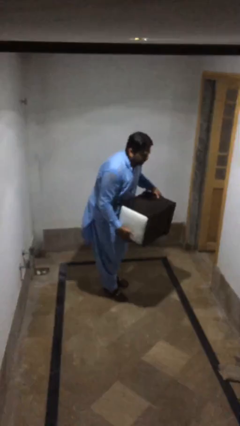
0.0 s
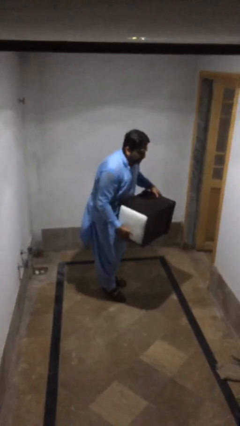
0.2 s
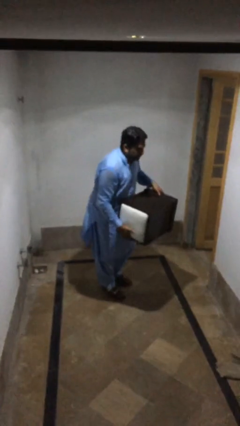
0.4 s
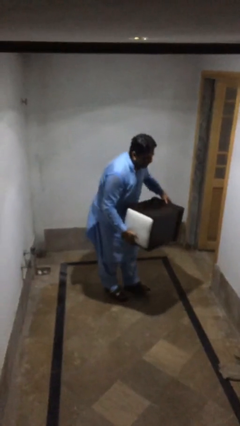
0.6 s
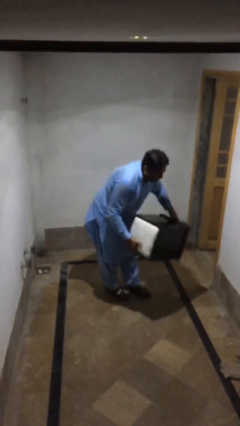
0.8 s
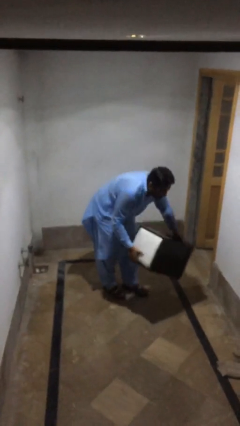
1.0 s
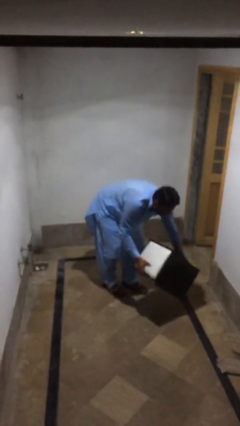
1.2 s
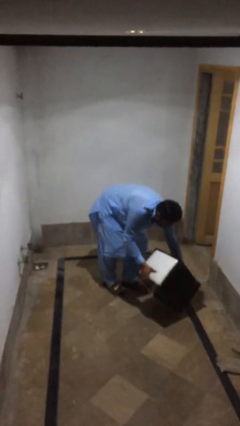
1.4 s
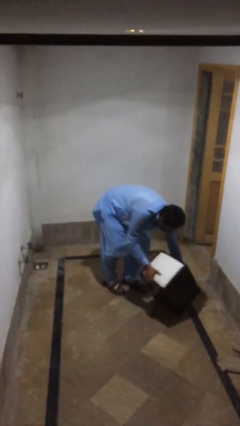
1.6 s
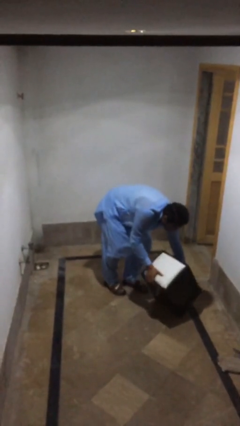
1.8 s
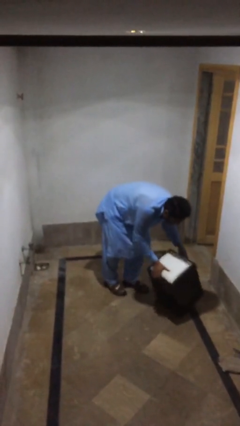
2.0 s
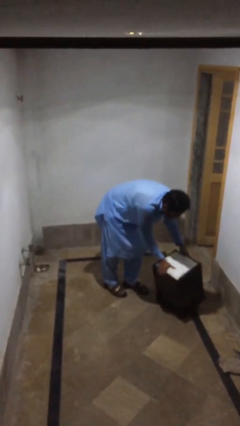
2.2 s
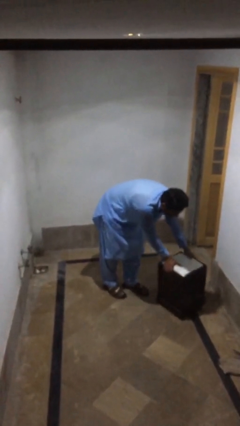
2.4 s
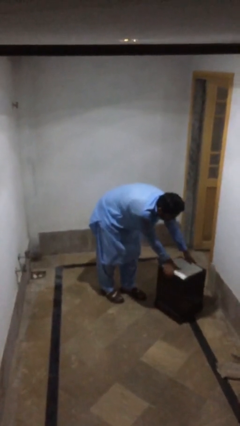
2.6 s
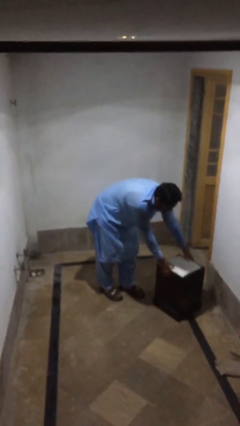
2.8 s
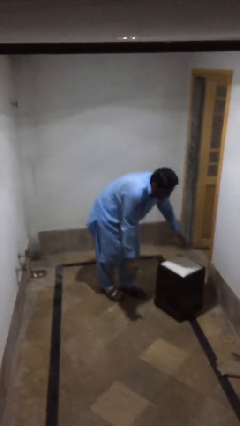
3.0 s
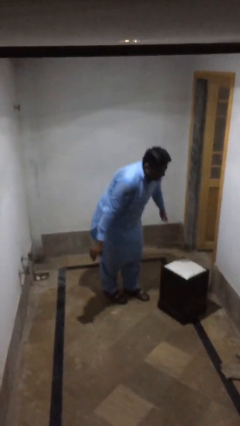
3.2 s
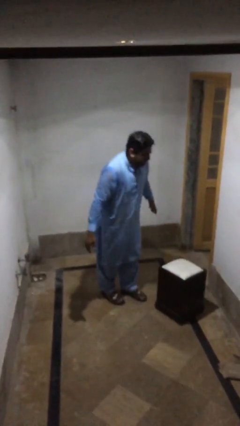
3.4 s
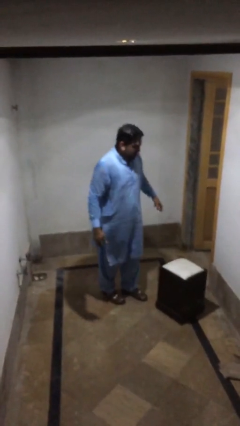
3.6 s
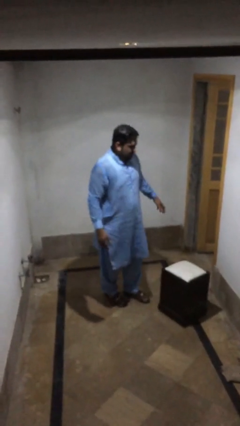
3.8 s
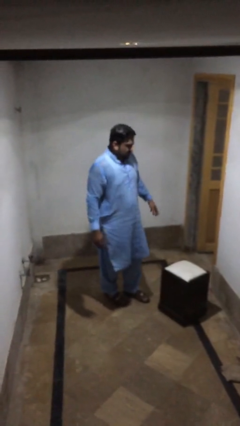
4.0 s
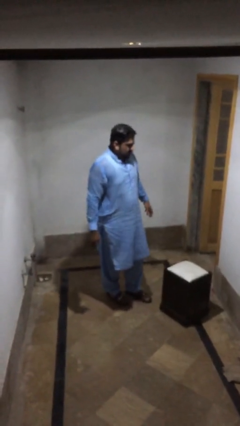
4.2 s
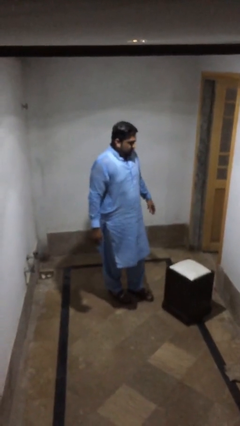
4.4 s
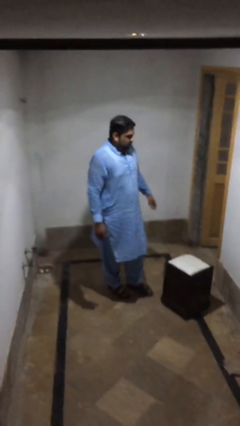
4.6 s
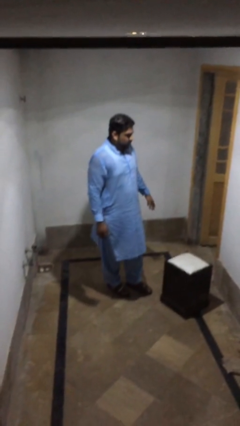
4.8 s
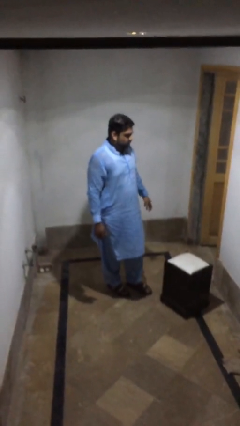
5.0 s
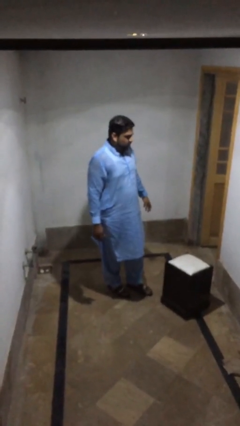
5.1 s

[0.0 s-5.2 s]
person puts down object on floor

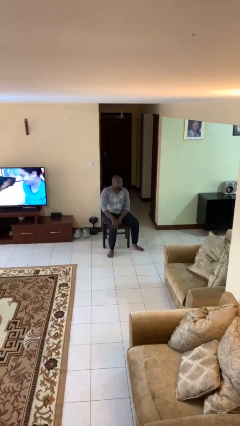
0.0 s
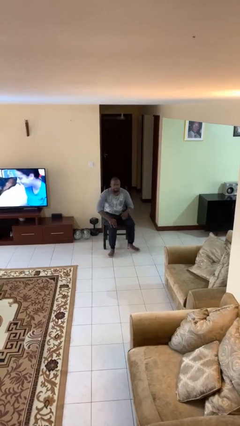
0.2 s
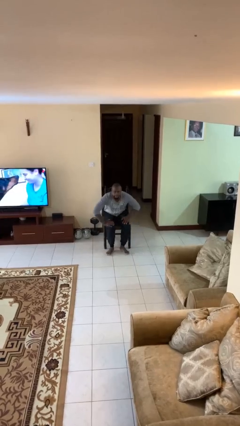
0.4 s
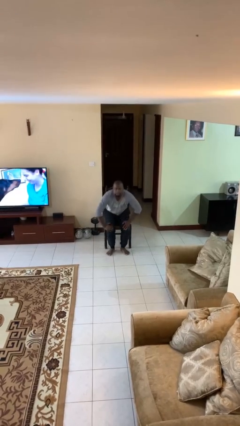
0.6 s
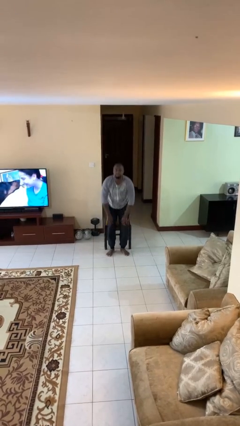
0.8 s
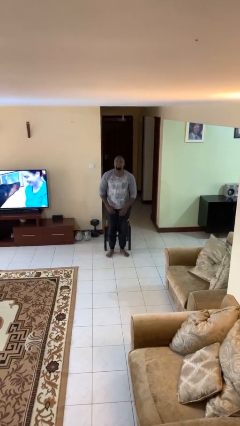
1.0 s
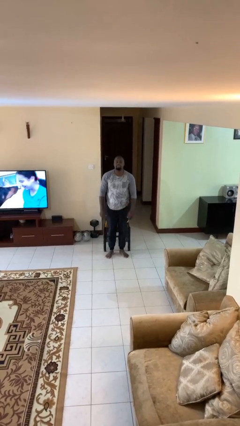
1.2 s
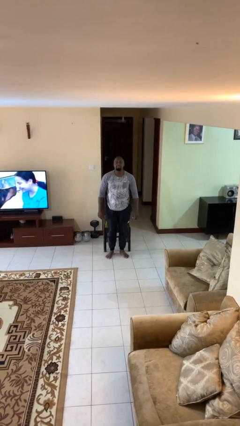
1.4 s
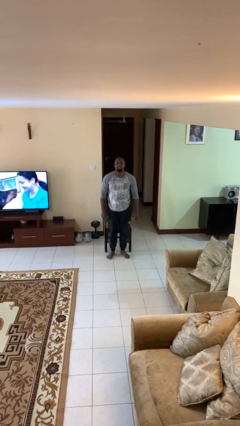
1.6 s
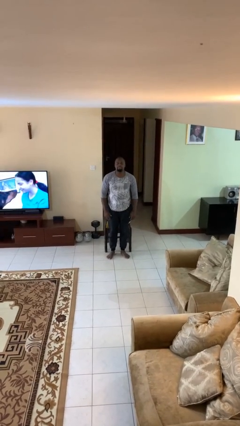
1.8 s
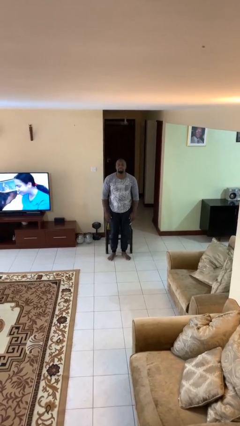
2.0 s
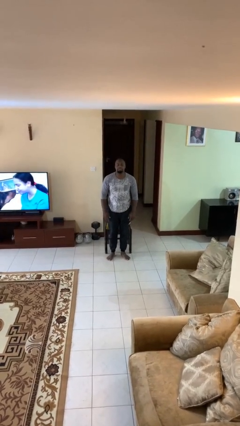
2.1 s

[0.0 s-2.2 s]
person stands up

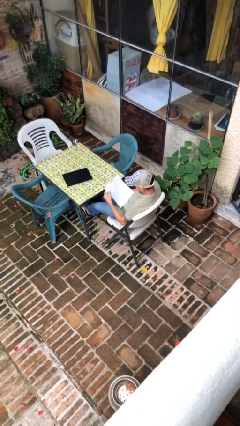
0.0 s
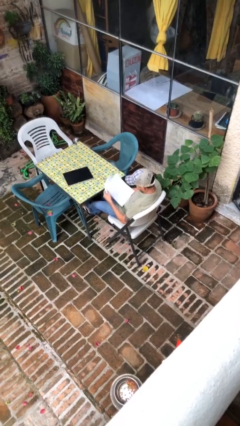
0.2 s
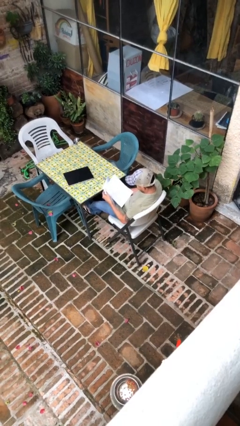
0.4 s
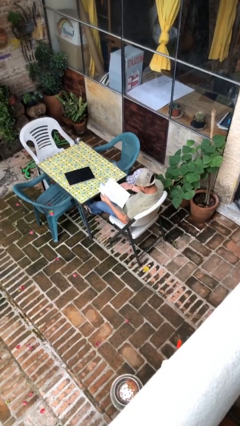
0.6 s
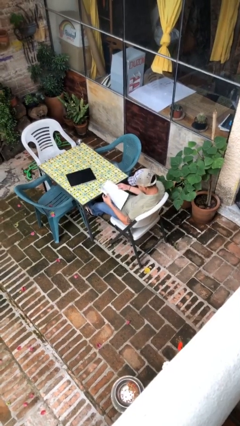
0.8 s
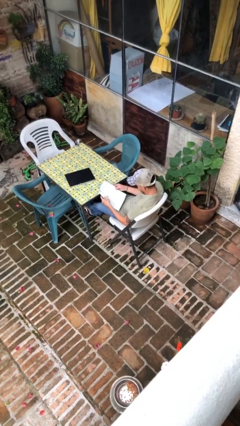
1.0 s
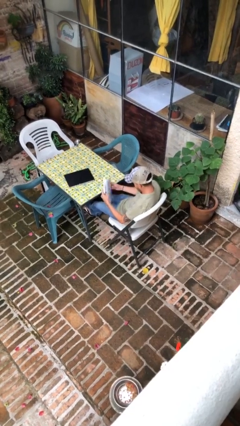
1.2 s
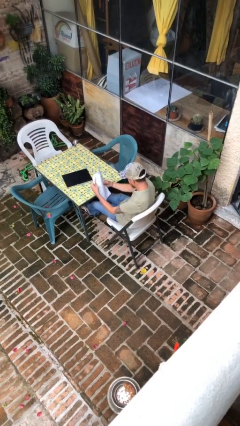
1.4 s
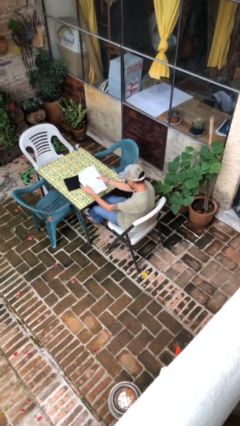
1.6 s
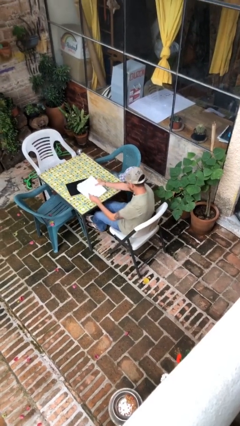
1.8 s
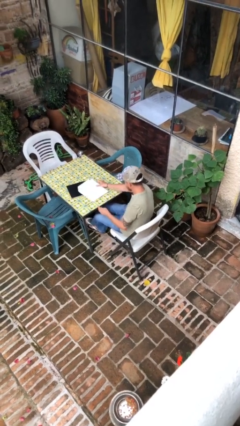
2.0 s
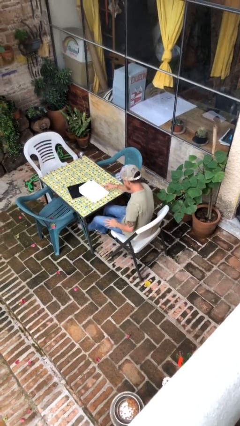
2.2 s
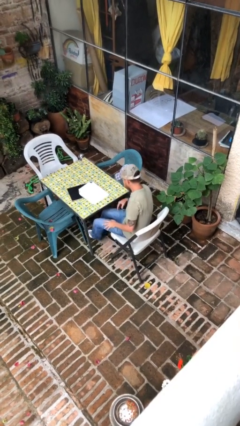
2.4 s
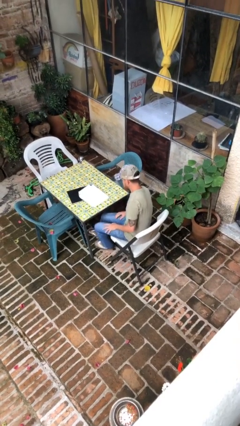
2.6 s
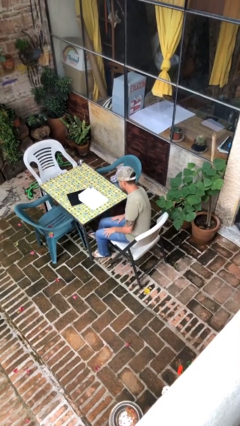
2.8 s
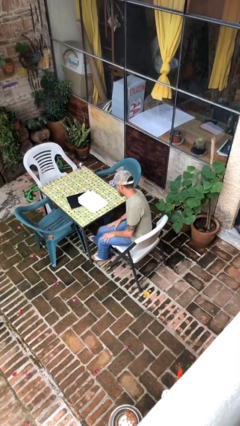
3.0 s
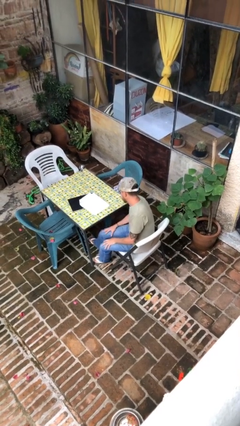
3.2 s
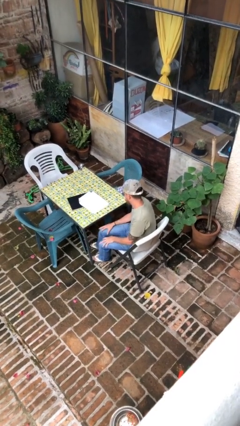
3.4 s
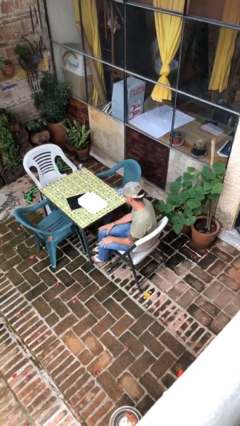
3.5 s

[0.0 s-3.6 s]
person puts down object on table

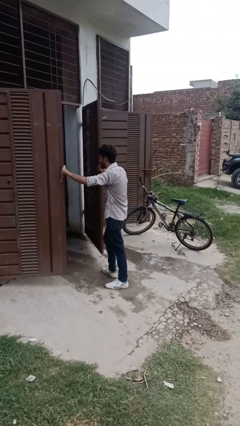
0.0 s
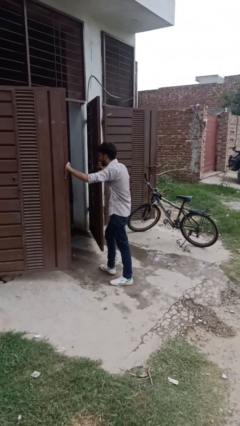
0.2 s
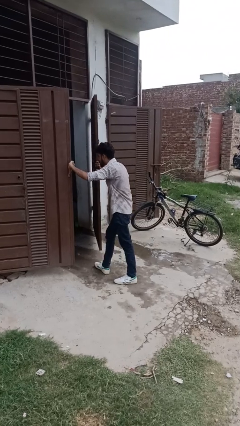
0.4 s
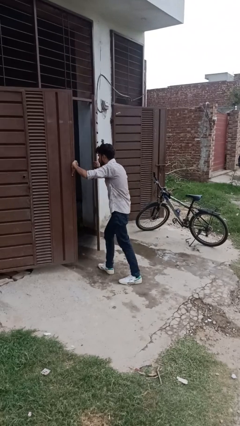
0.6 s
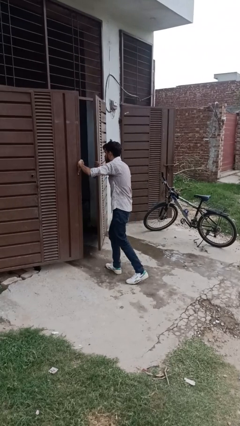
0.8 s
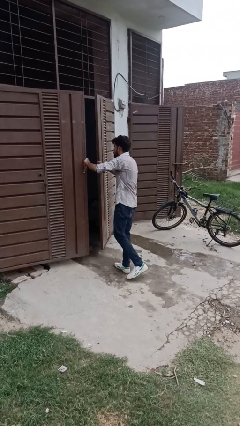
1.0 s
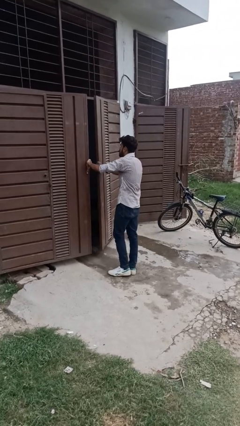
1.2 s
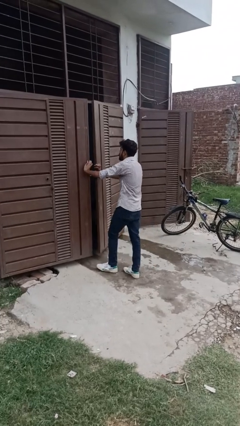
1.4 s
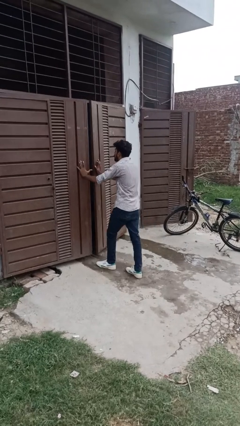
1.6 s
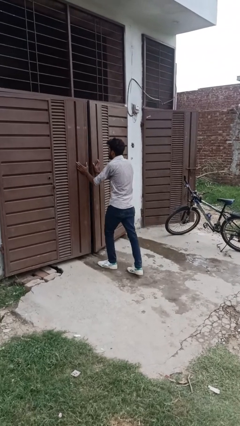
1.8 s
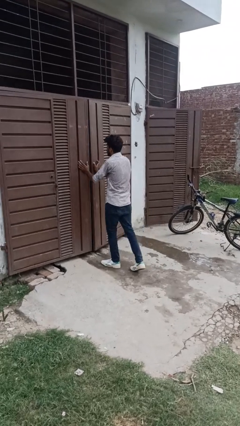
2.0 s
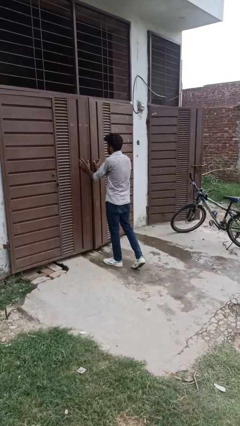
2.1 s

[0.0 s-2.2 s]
person closes gate

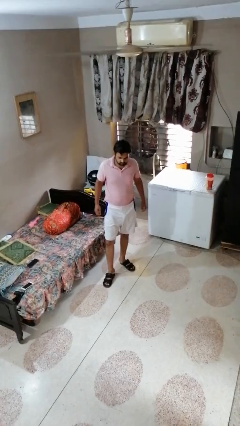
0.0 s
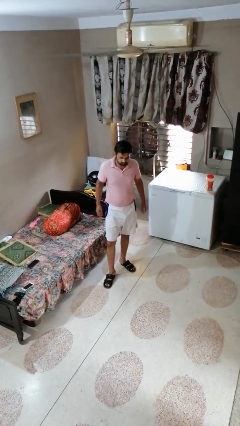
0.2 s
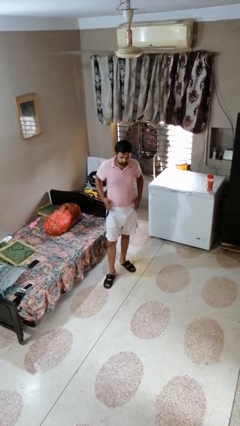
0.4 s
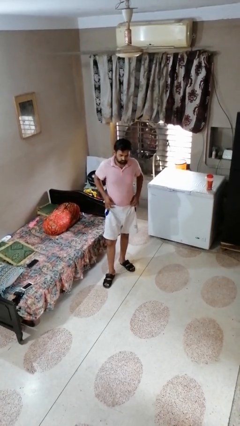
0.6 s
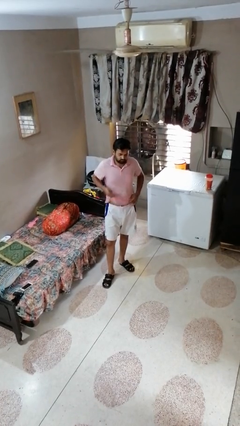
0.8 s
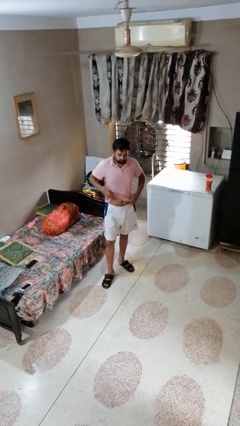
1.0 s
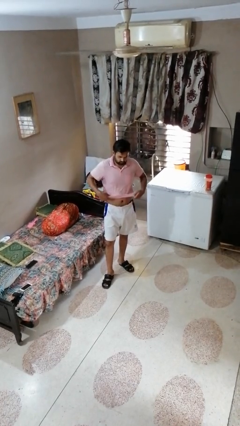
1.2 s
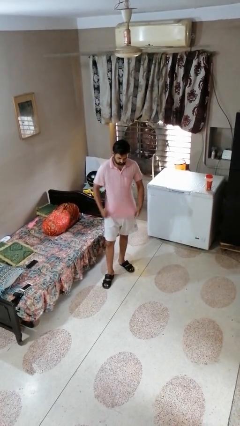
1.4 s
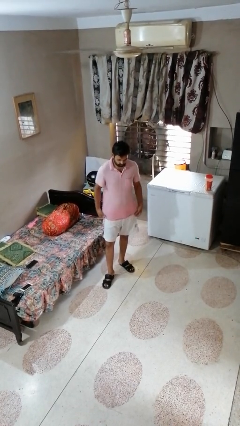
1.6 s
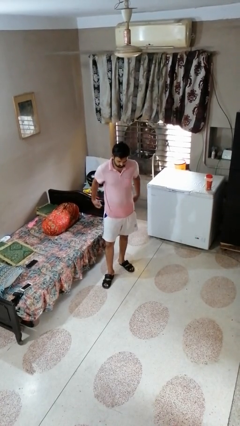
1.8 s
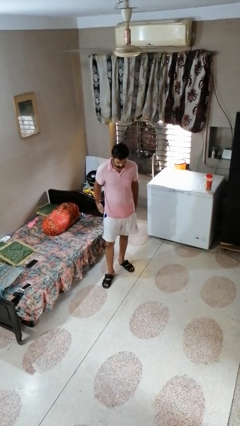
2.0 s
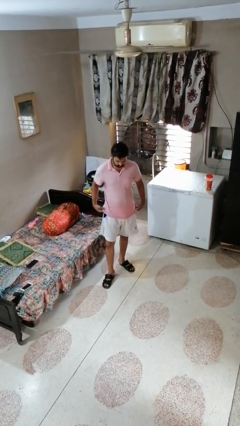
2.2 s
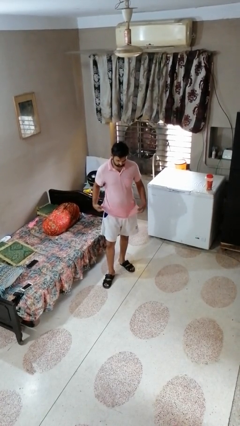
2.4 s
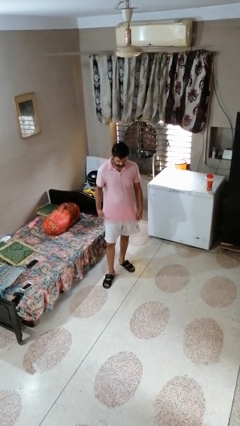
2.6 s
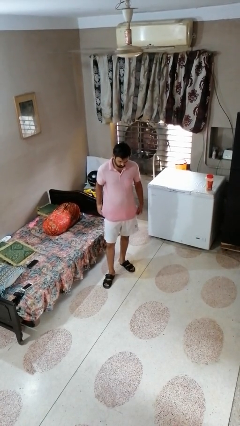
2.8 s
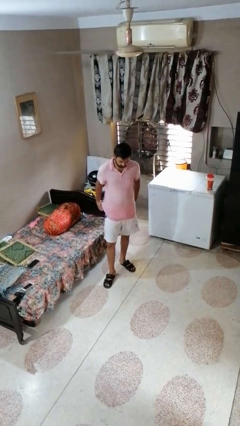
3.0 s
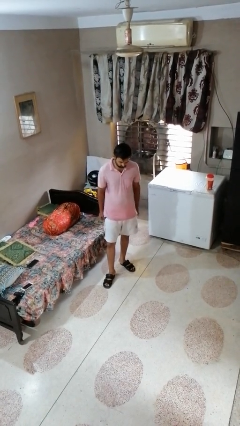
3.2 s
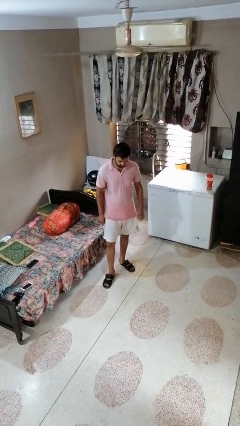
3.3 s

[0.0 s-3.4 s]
person untucks shirt

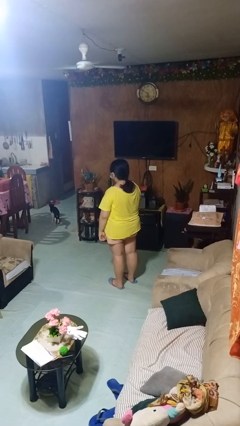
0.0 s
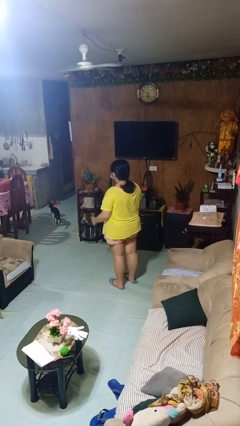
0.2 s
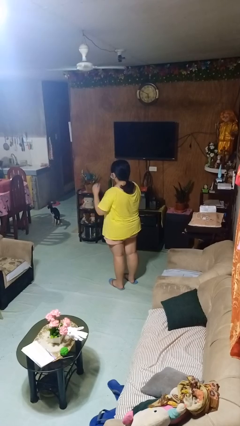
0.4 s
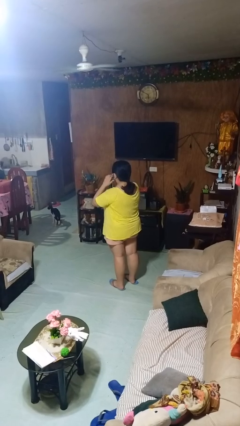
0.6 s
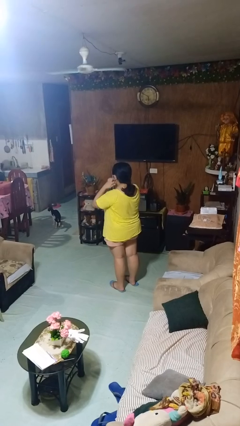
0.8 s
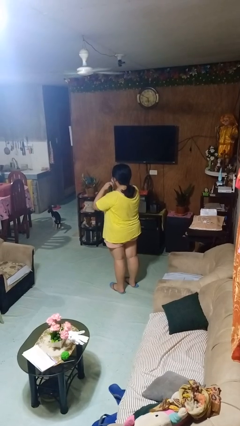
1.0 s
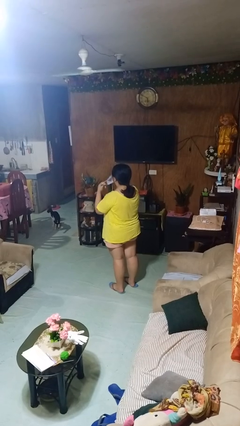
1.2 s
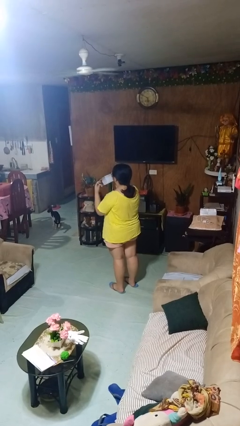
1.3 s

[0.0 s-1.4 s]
person takes off facemask
